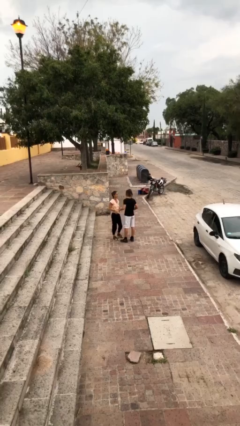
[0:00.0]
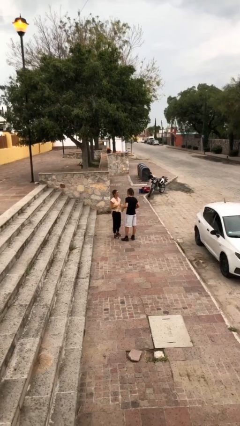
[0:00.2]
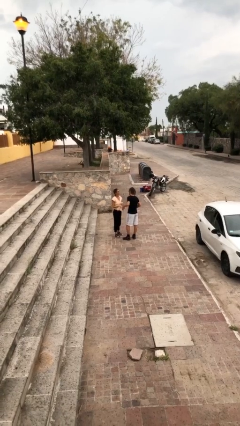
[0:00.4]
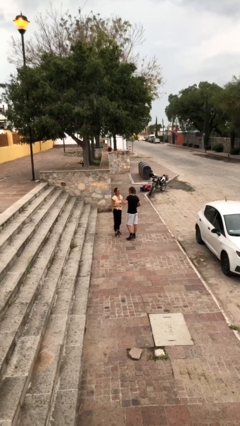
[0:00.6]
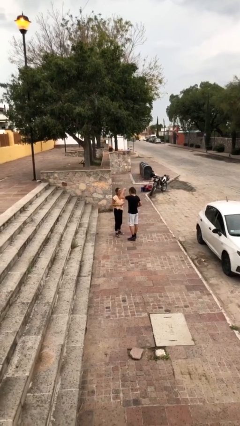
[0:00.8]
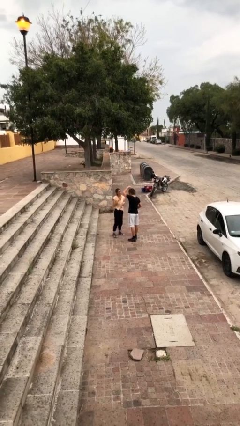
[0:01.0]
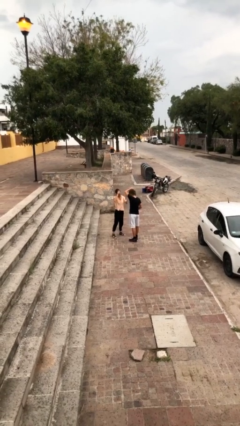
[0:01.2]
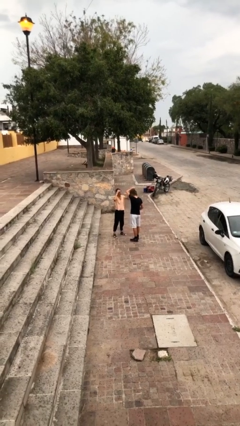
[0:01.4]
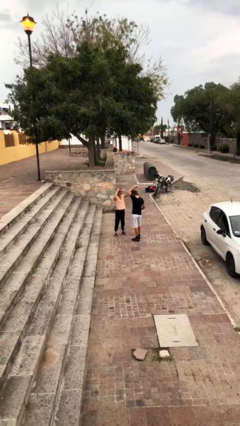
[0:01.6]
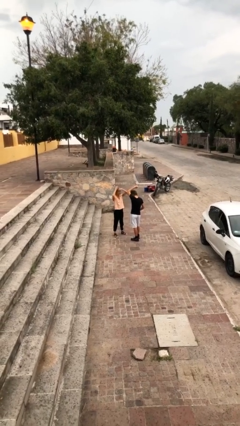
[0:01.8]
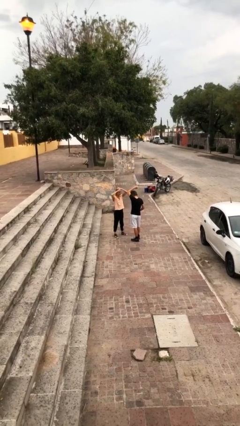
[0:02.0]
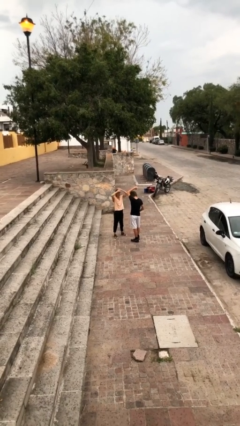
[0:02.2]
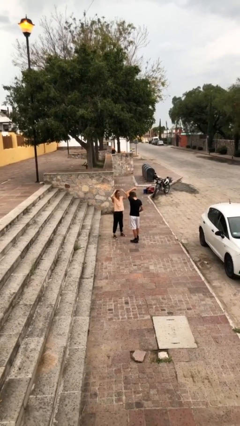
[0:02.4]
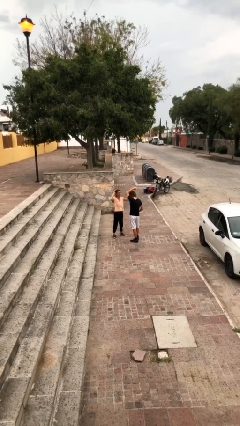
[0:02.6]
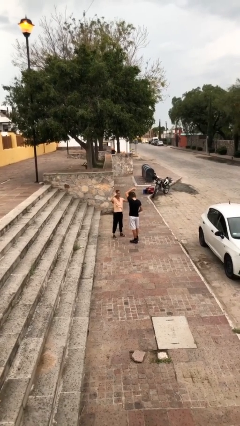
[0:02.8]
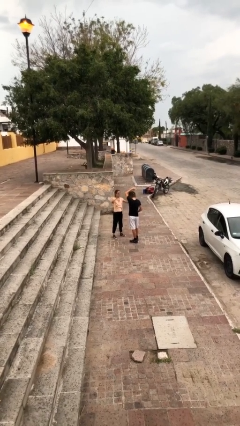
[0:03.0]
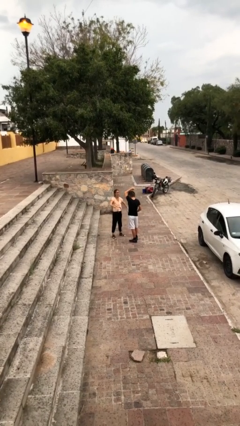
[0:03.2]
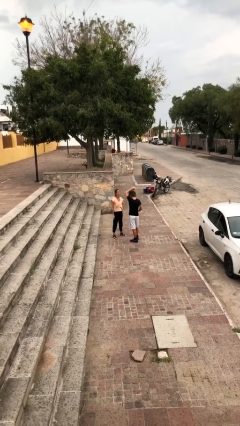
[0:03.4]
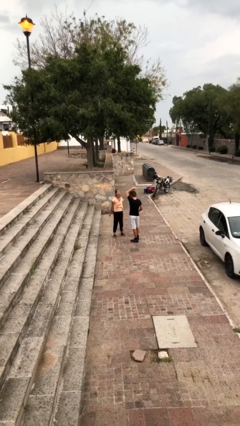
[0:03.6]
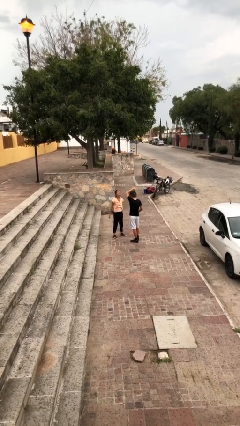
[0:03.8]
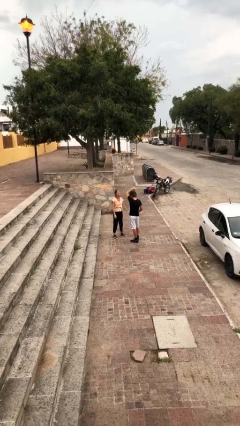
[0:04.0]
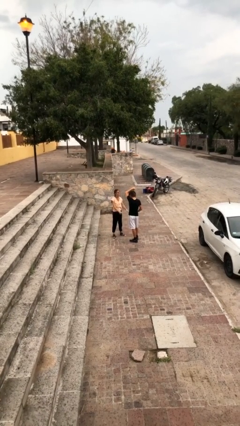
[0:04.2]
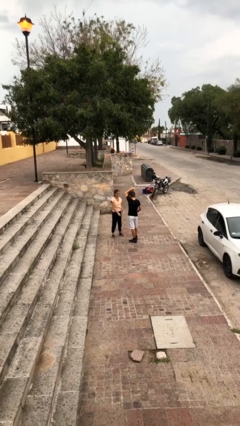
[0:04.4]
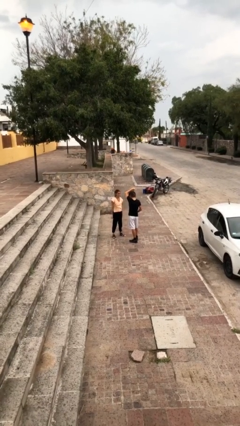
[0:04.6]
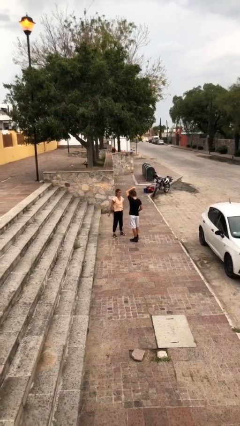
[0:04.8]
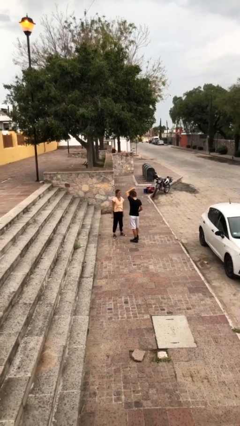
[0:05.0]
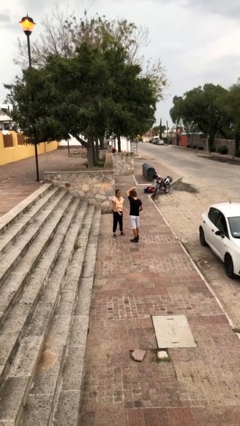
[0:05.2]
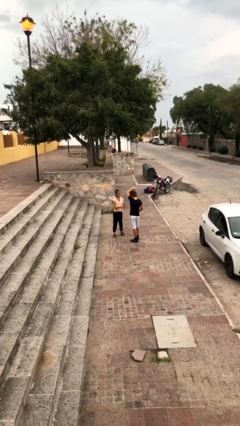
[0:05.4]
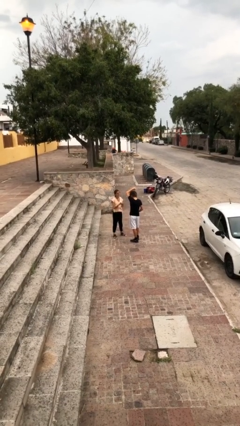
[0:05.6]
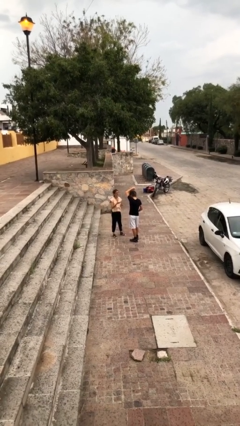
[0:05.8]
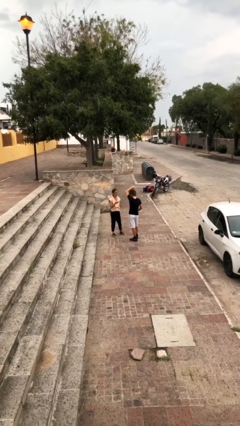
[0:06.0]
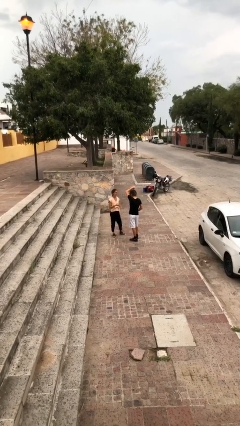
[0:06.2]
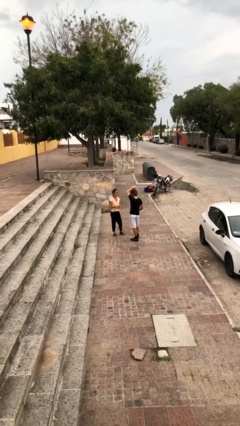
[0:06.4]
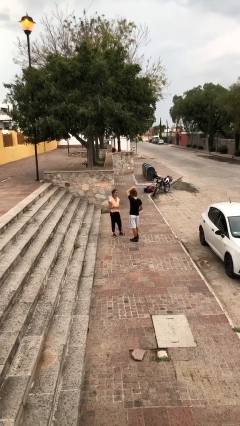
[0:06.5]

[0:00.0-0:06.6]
person talks to person

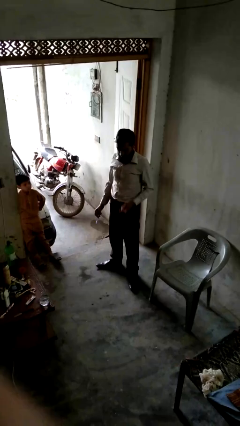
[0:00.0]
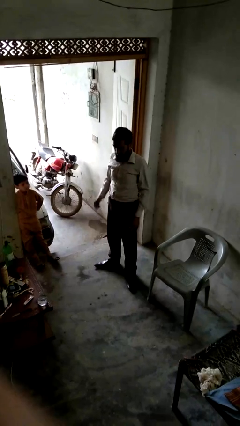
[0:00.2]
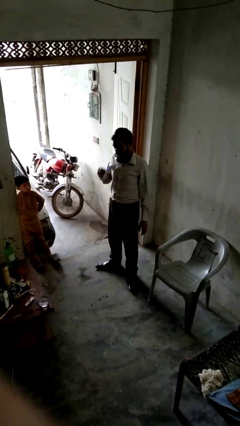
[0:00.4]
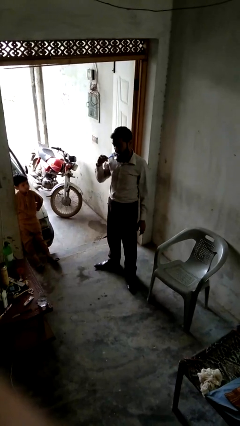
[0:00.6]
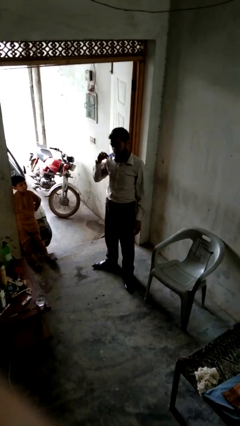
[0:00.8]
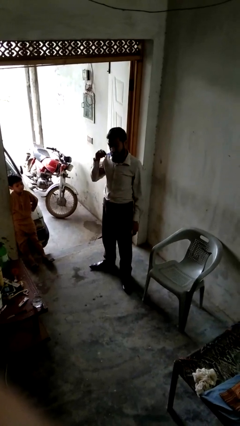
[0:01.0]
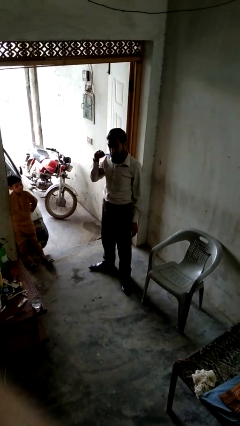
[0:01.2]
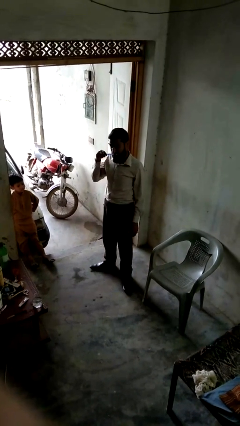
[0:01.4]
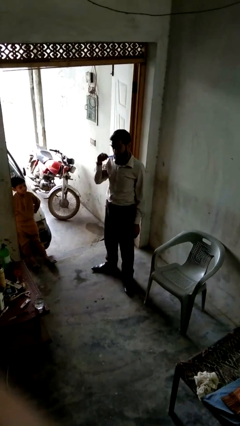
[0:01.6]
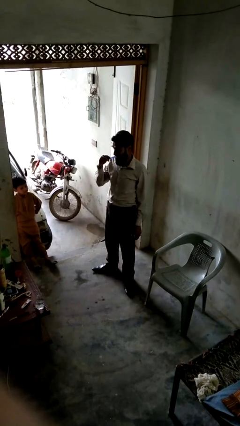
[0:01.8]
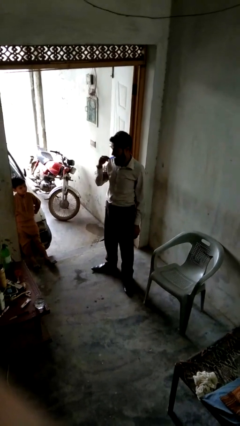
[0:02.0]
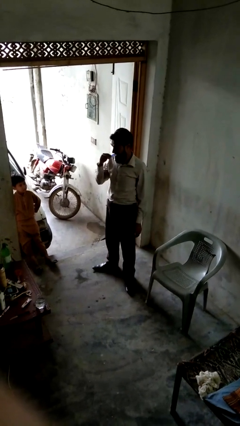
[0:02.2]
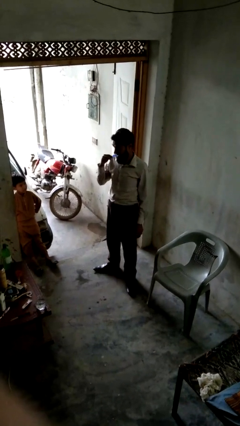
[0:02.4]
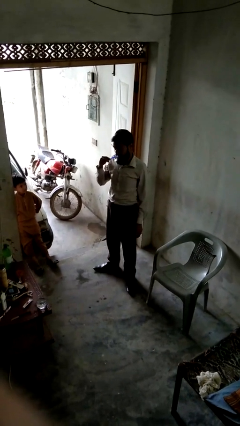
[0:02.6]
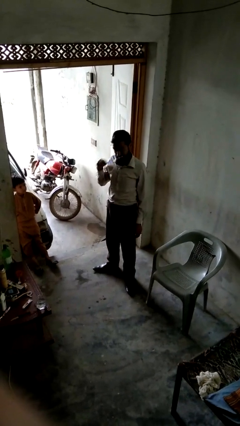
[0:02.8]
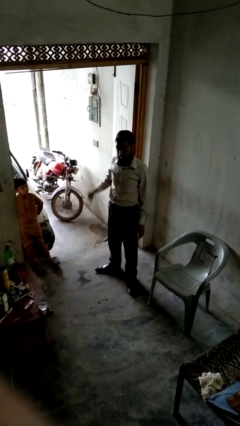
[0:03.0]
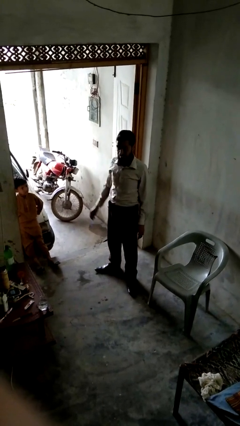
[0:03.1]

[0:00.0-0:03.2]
person brushes teeth

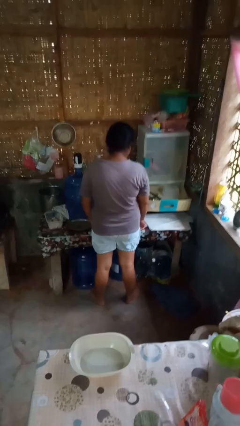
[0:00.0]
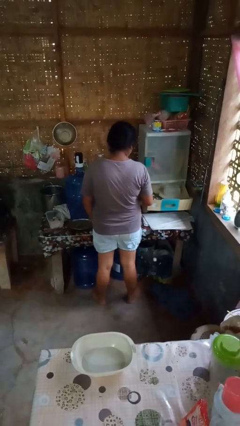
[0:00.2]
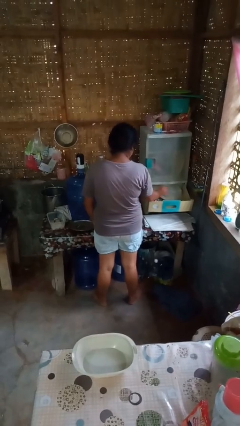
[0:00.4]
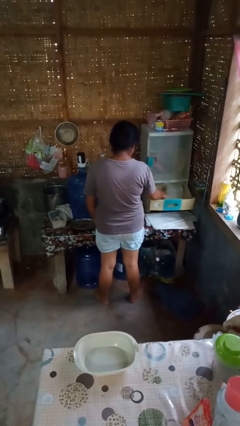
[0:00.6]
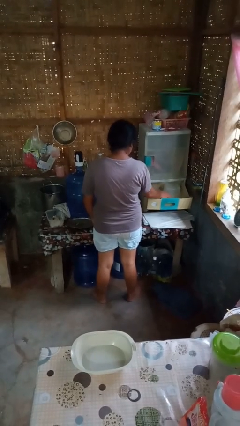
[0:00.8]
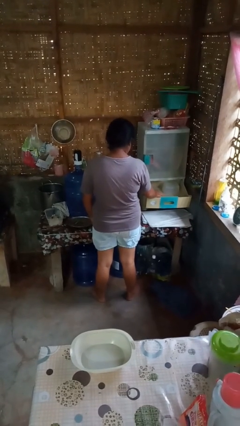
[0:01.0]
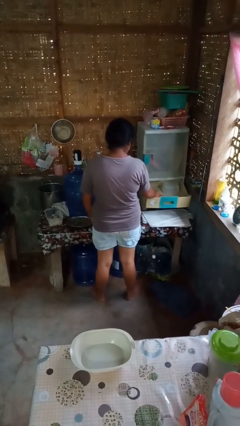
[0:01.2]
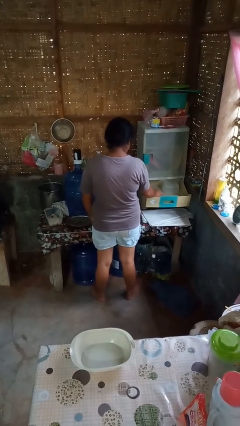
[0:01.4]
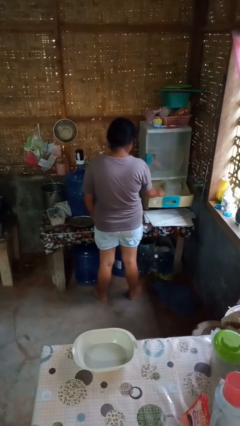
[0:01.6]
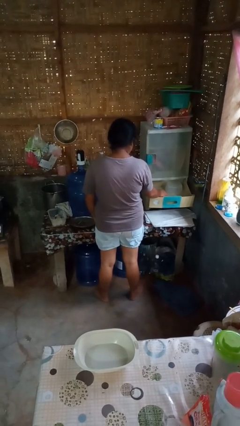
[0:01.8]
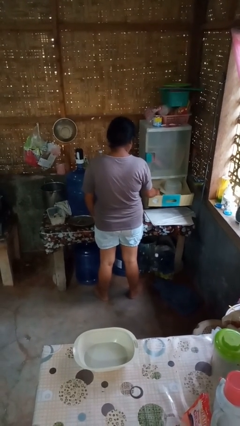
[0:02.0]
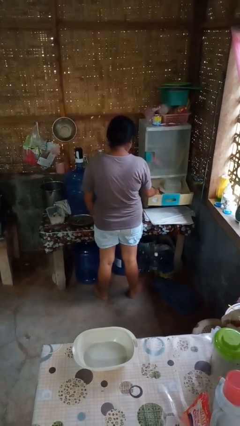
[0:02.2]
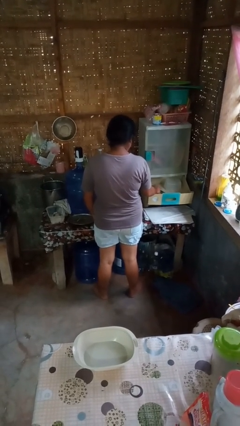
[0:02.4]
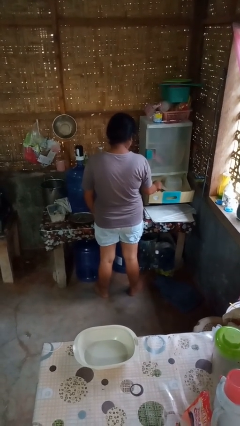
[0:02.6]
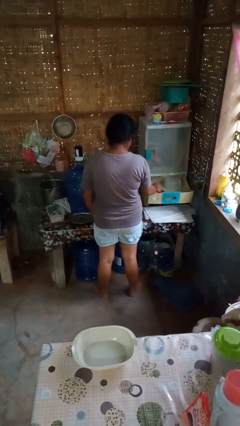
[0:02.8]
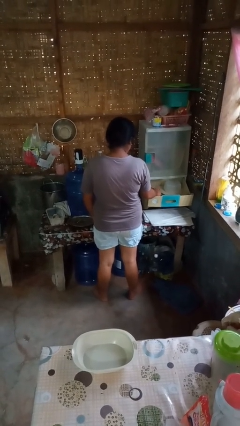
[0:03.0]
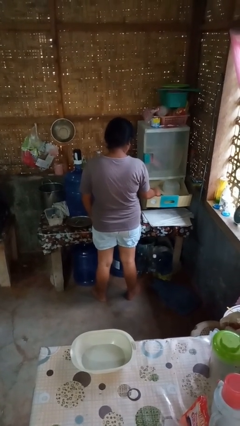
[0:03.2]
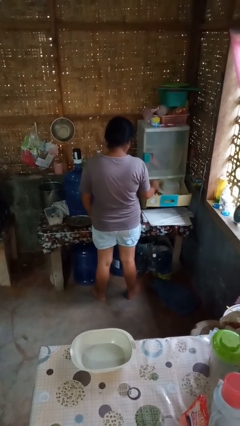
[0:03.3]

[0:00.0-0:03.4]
person searches in kitchen drawer

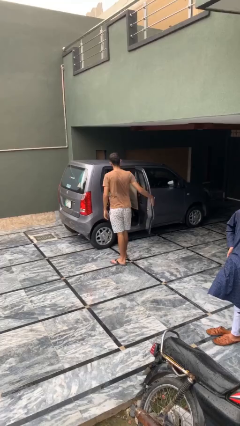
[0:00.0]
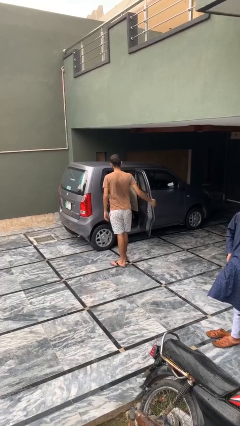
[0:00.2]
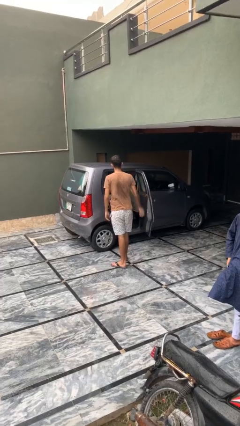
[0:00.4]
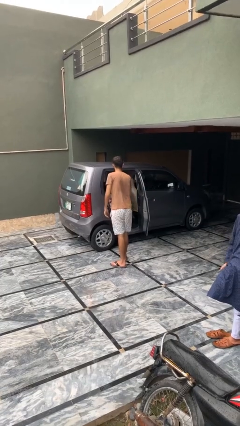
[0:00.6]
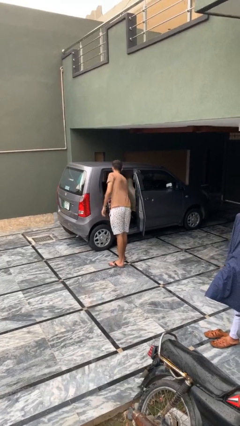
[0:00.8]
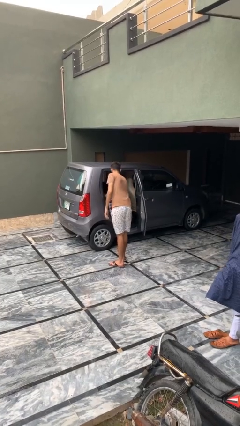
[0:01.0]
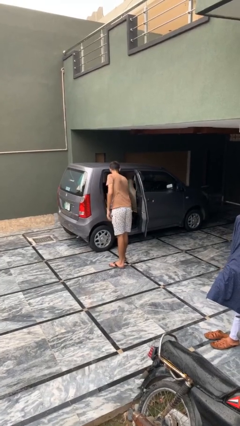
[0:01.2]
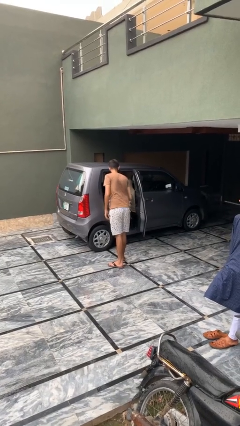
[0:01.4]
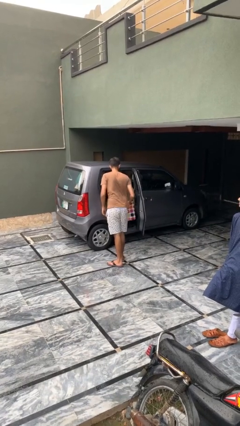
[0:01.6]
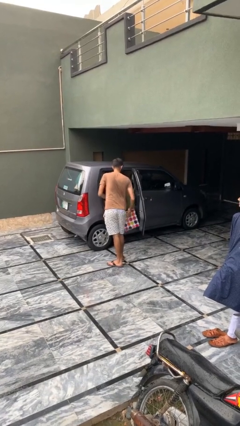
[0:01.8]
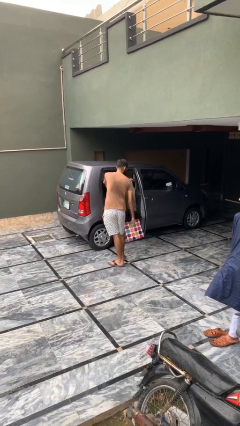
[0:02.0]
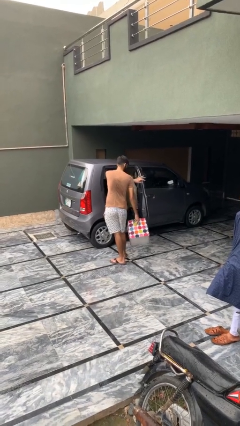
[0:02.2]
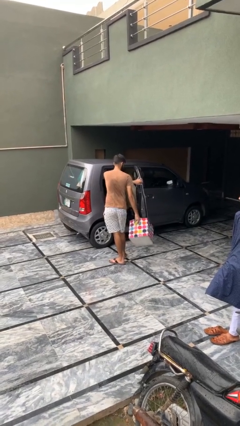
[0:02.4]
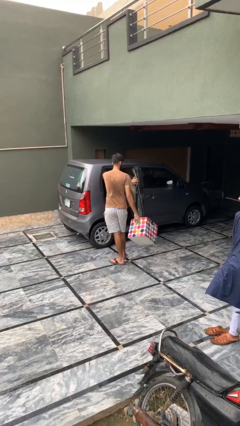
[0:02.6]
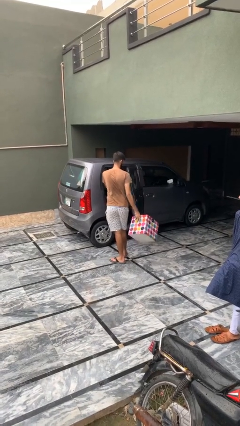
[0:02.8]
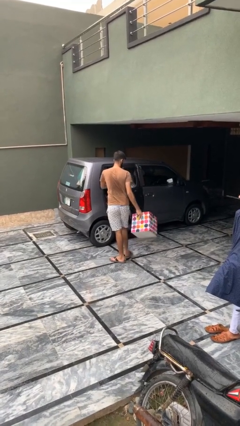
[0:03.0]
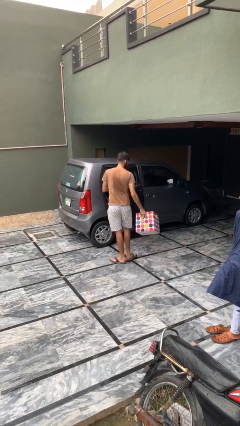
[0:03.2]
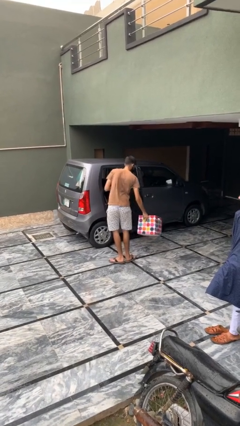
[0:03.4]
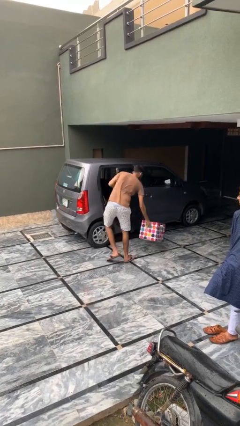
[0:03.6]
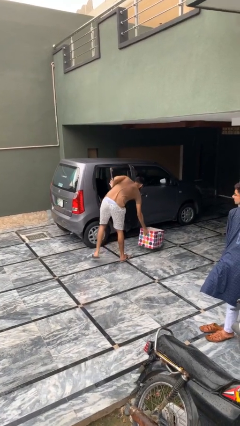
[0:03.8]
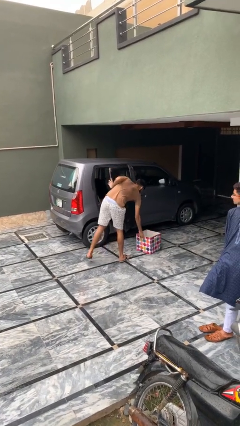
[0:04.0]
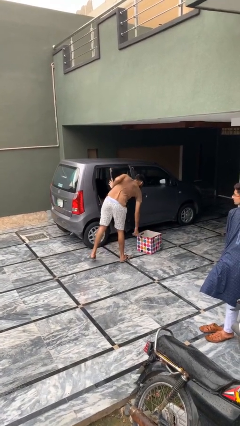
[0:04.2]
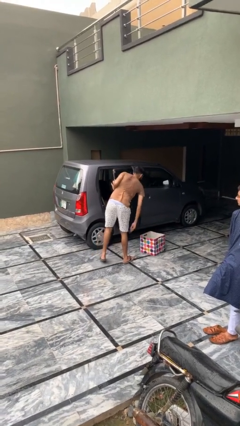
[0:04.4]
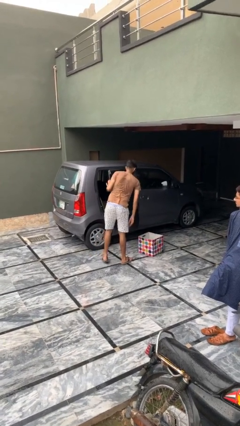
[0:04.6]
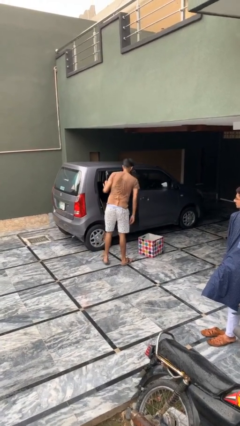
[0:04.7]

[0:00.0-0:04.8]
person unloads car
